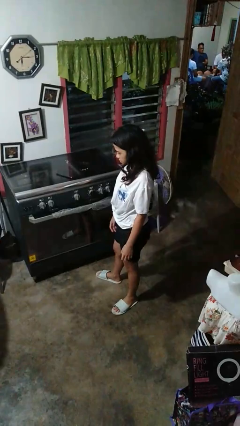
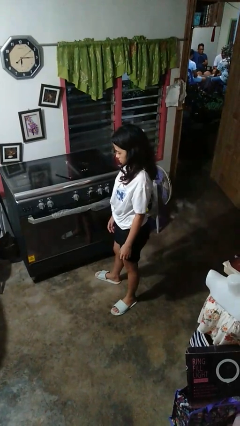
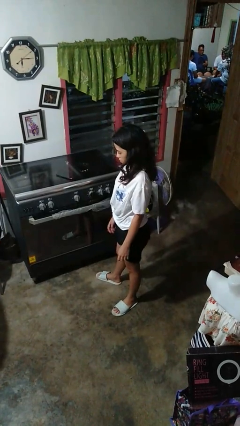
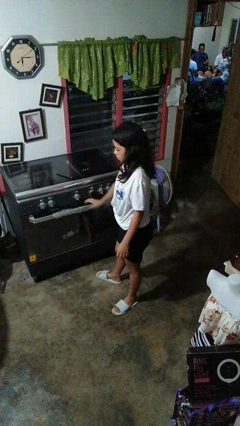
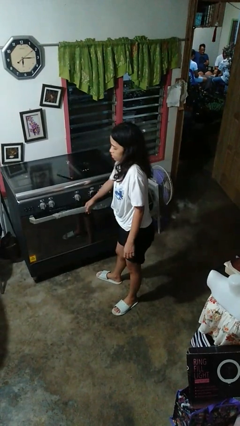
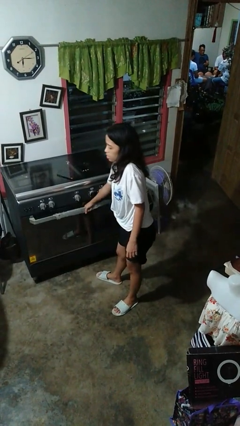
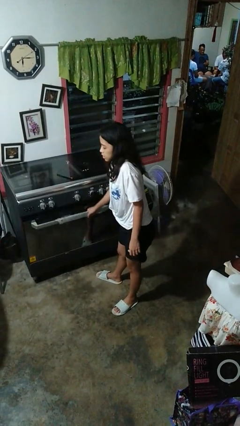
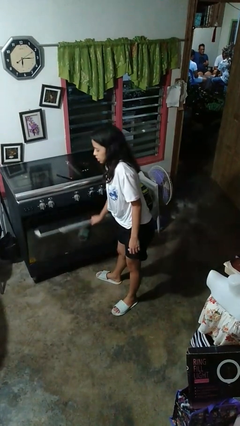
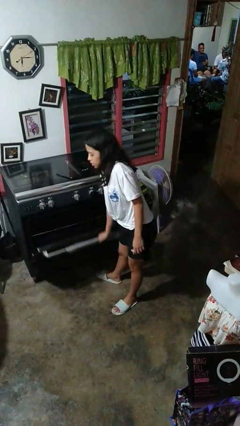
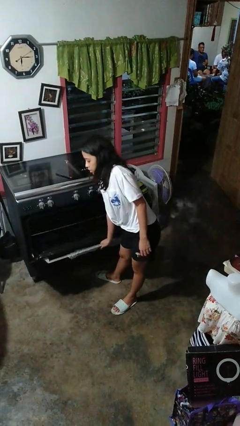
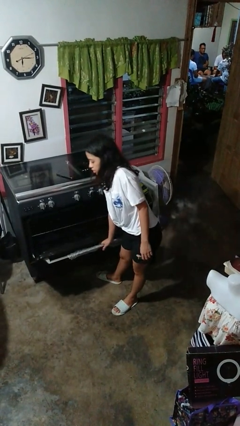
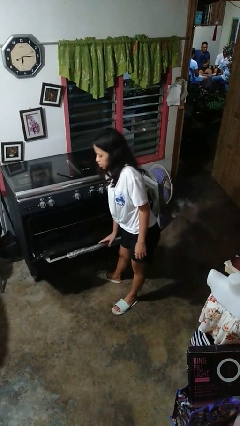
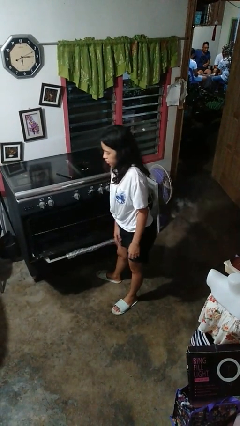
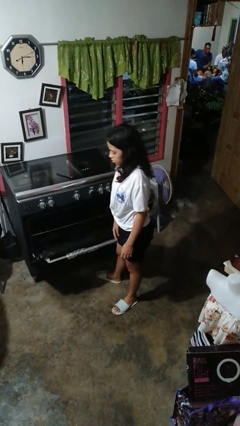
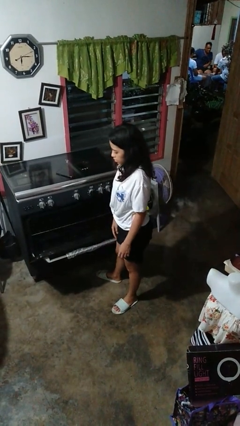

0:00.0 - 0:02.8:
person opens oven door

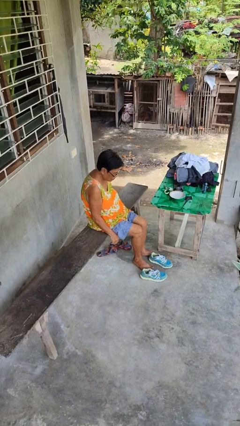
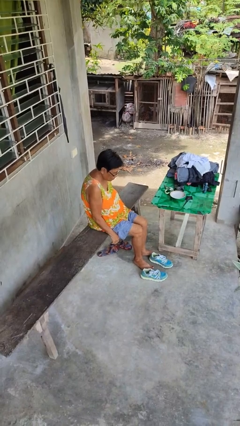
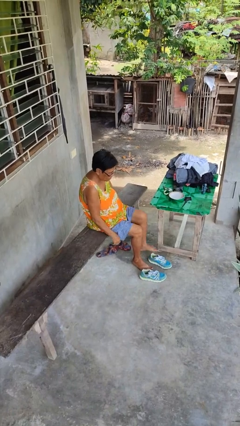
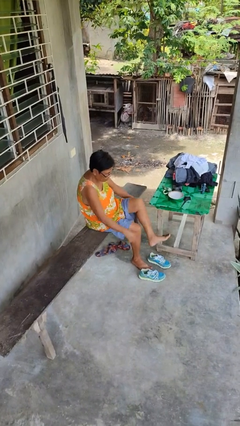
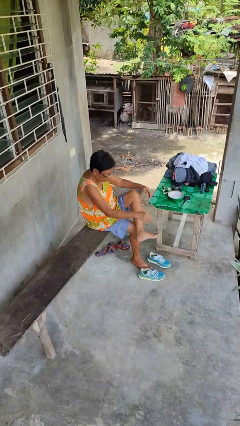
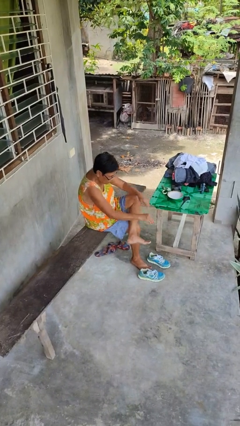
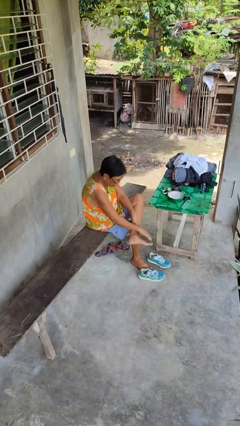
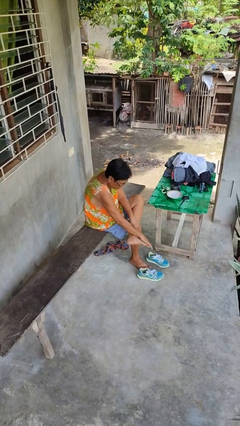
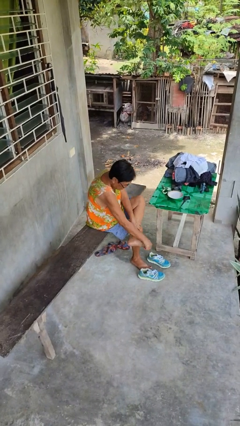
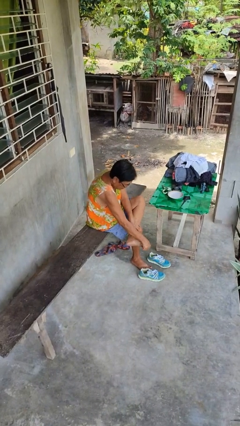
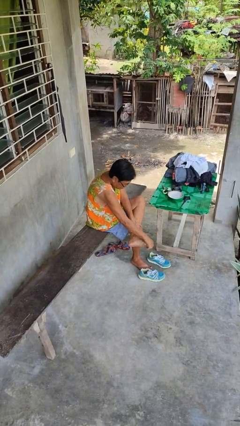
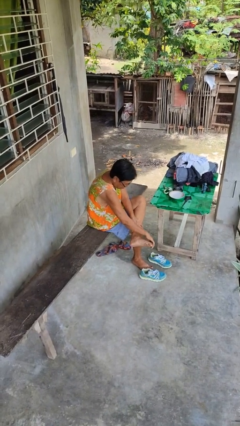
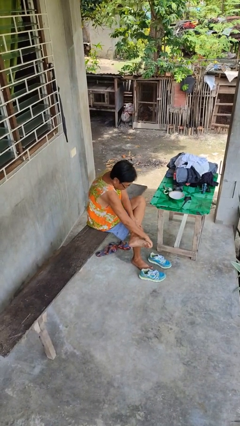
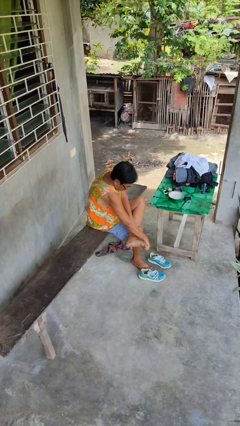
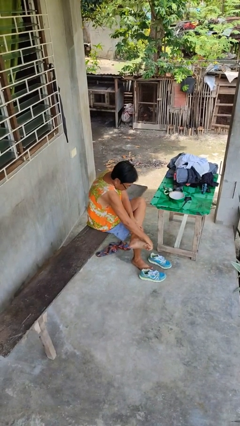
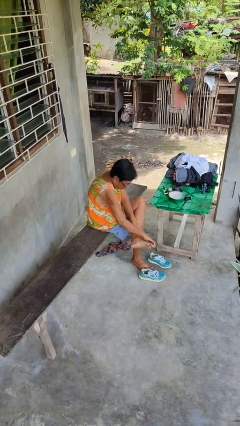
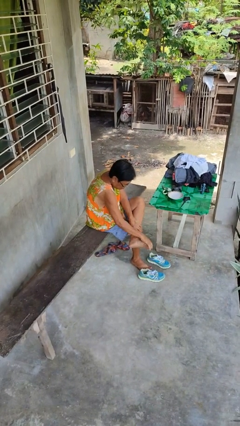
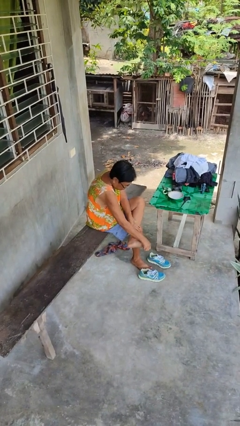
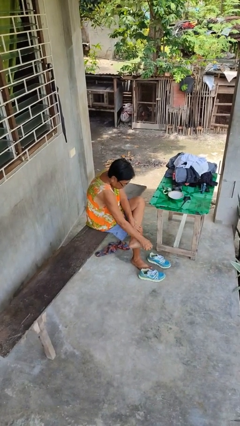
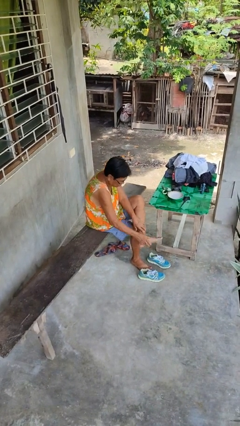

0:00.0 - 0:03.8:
person rubs foot

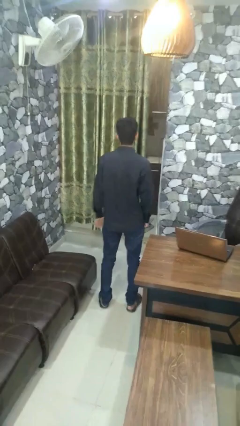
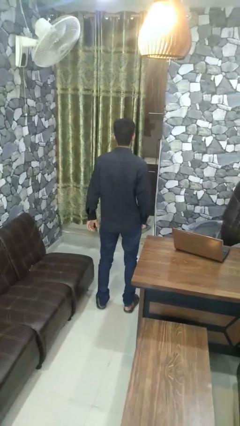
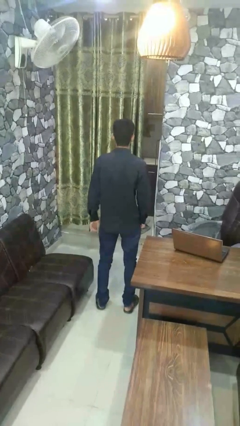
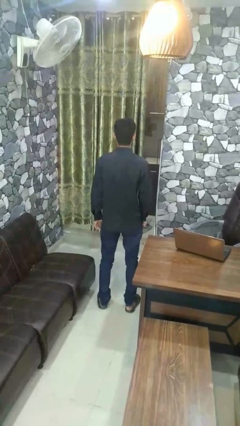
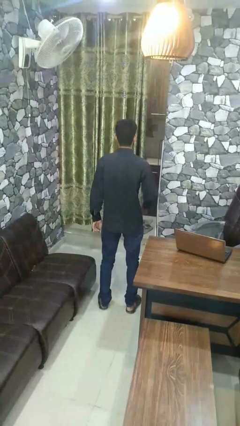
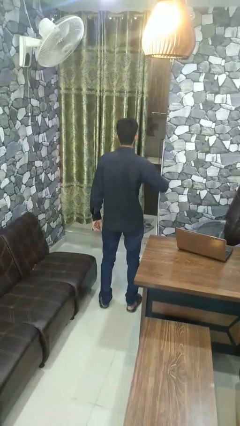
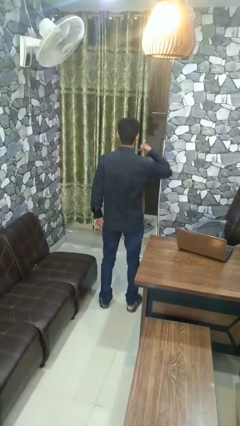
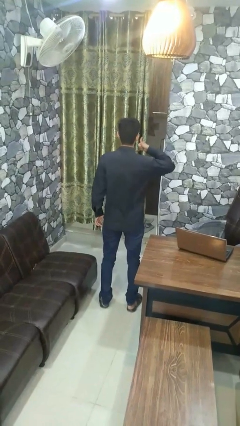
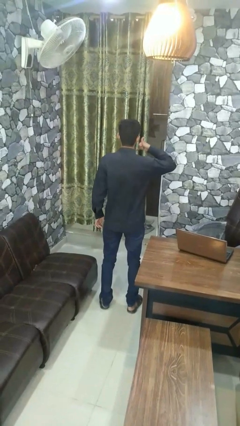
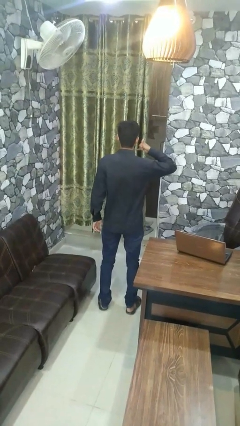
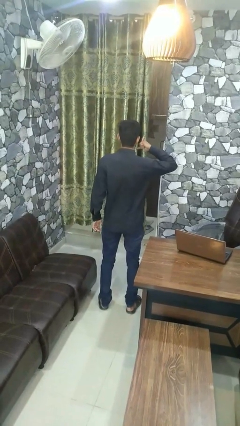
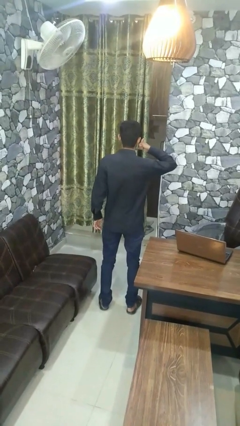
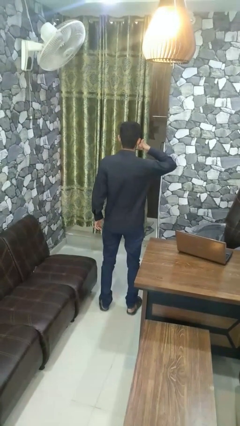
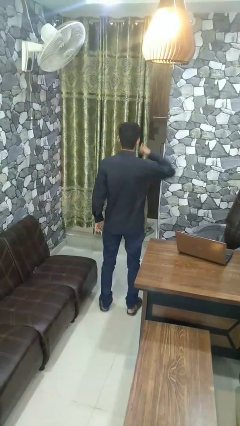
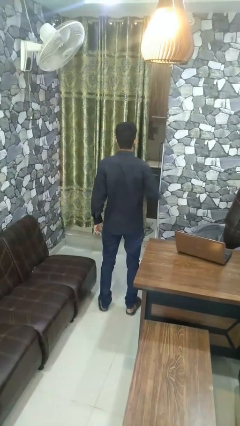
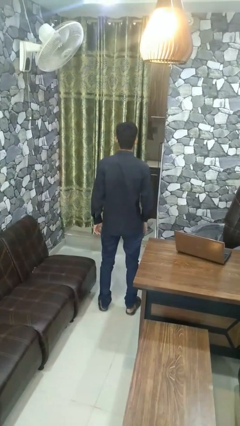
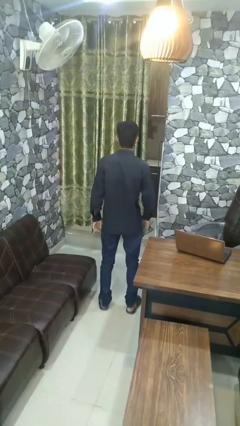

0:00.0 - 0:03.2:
person gestures call me

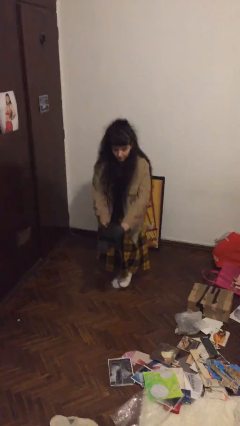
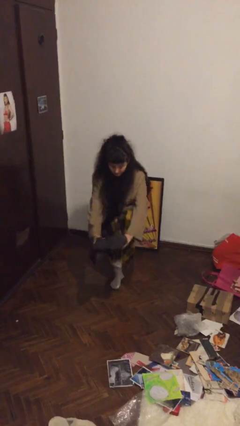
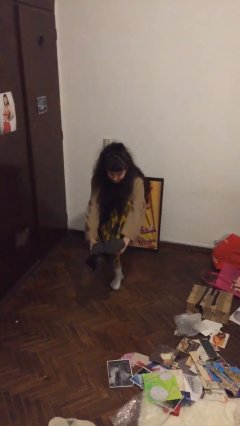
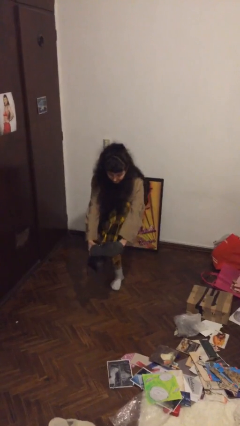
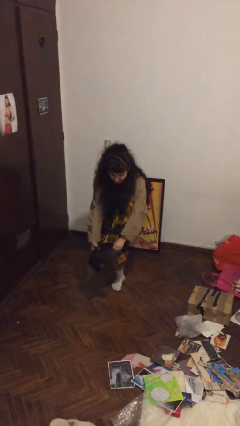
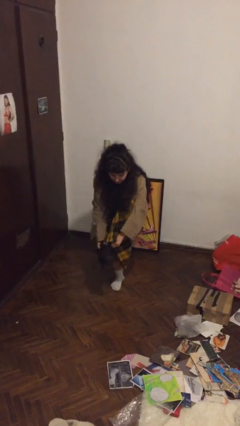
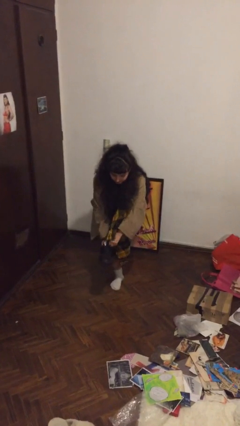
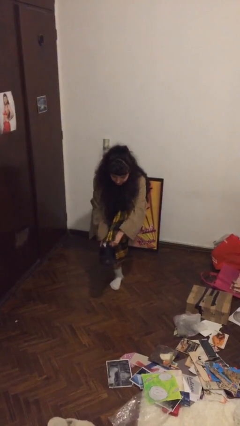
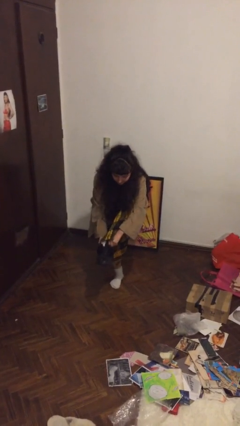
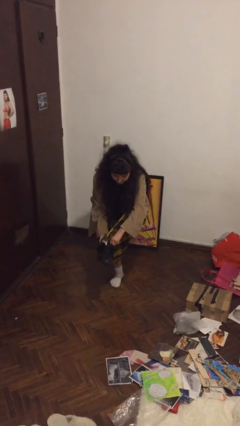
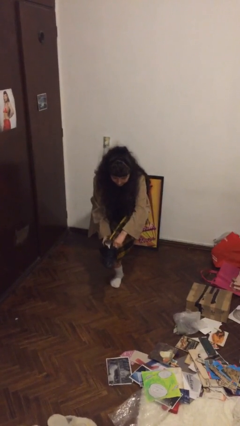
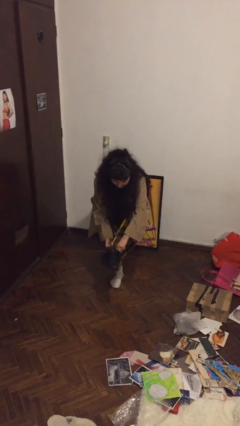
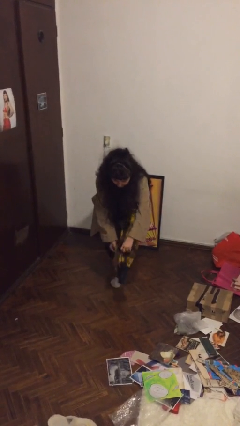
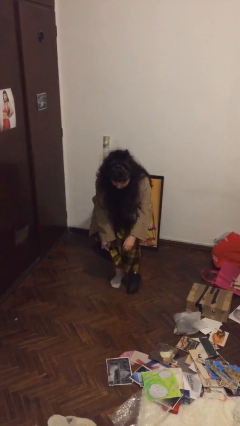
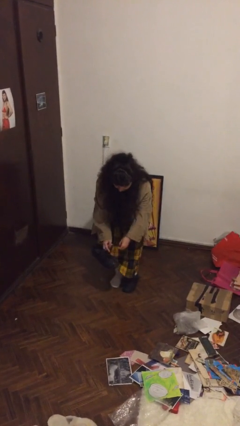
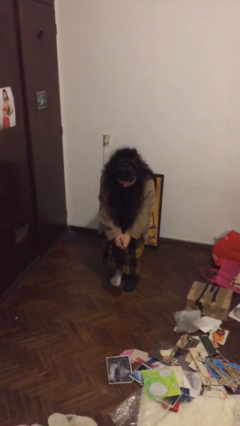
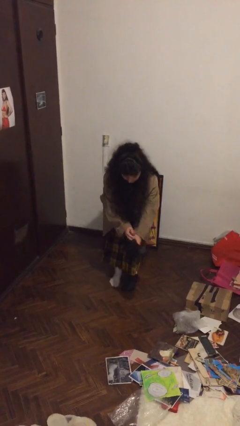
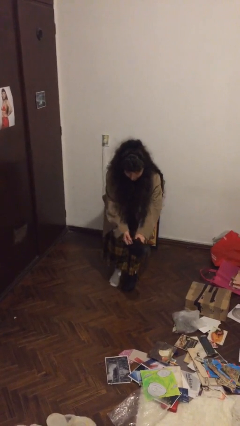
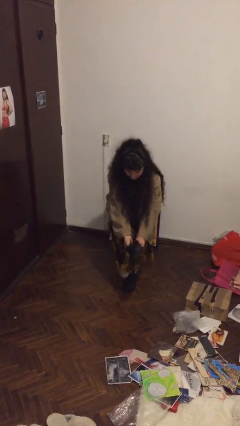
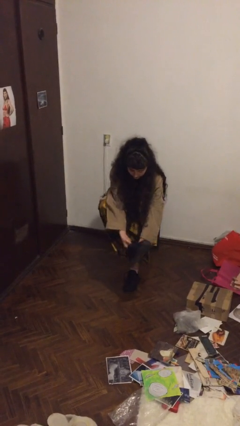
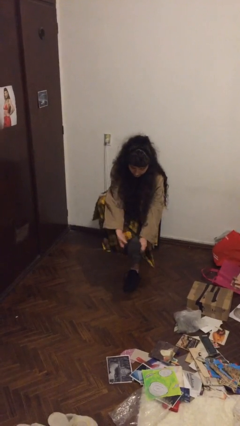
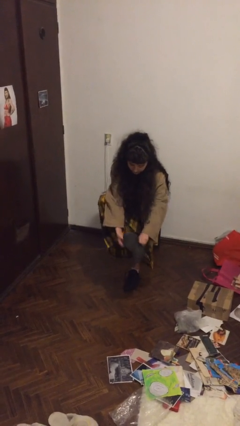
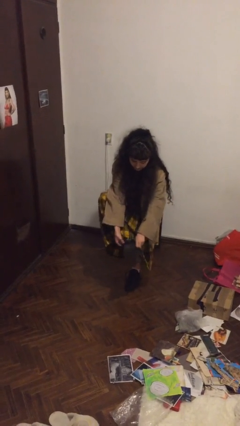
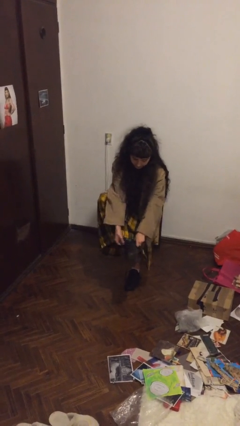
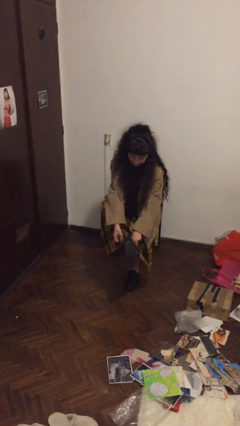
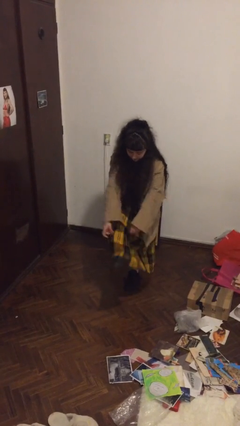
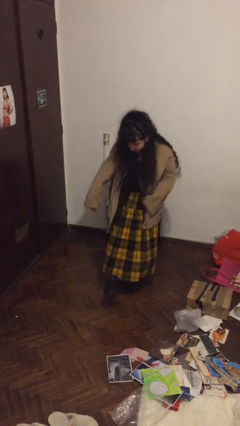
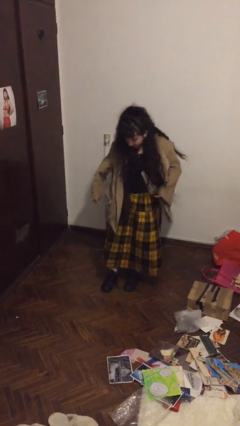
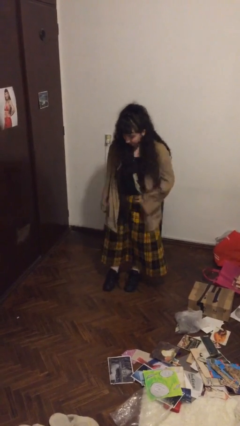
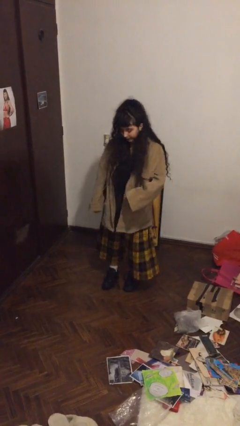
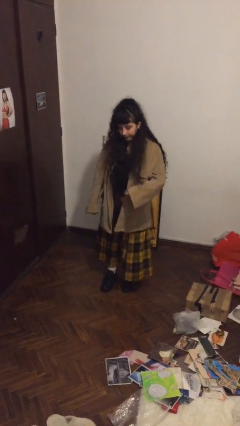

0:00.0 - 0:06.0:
person puts on shoes

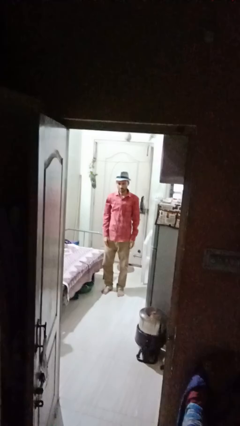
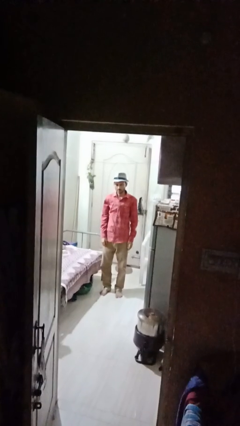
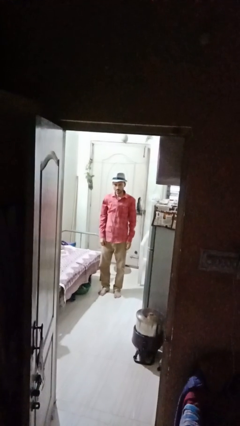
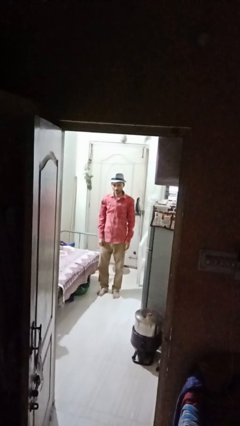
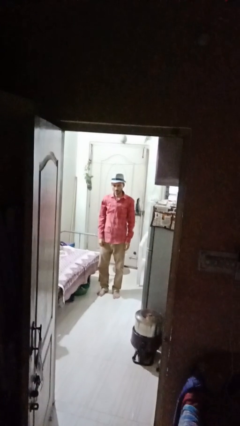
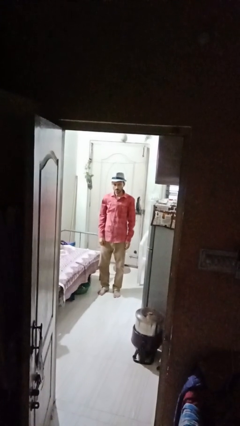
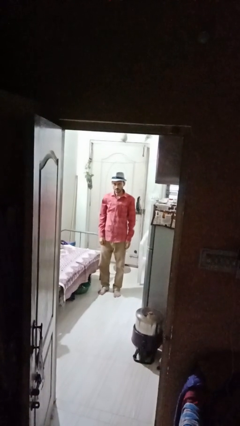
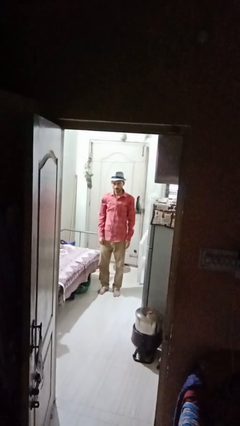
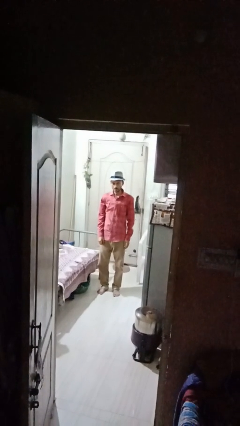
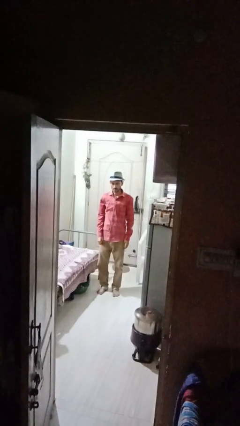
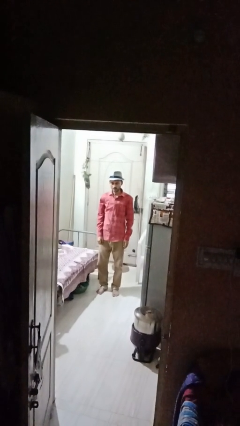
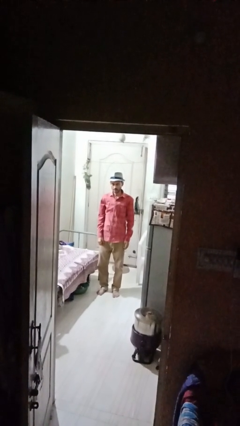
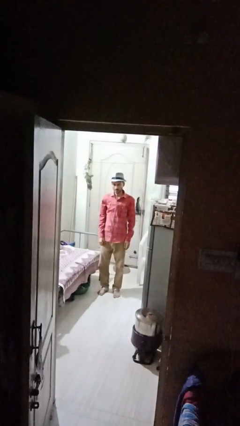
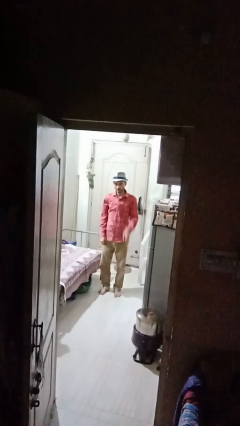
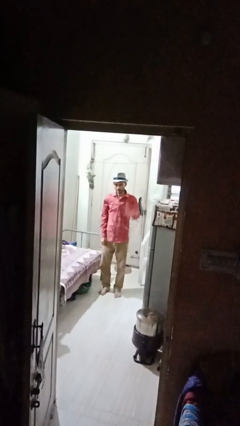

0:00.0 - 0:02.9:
person gestures lower hand
